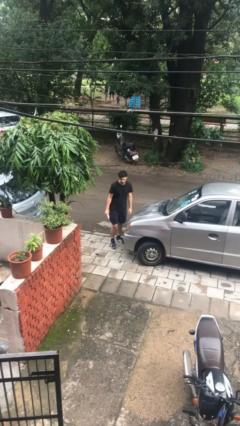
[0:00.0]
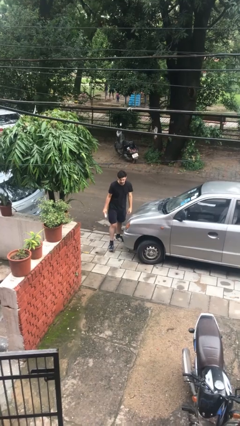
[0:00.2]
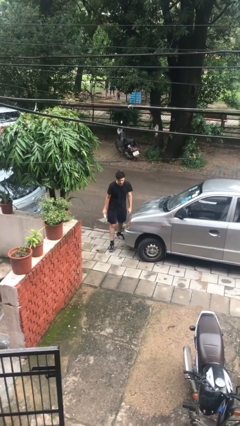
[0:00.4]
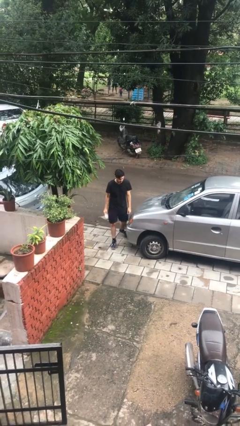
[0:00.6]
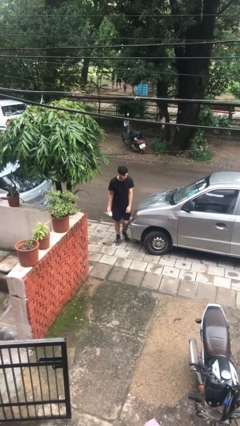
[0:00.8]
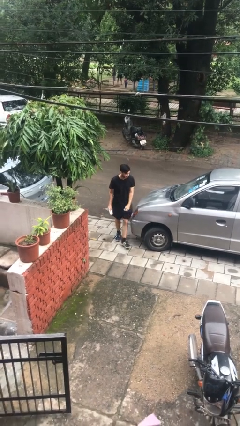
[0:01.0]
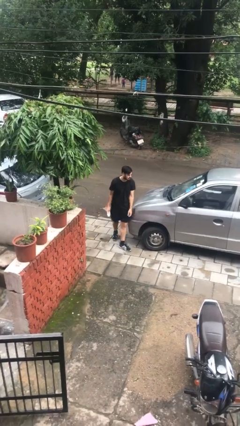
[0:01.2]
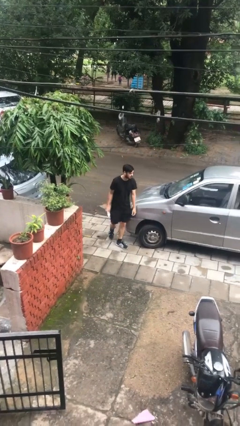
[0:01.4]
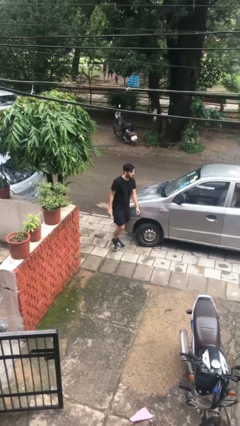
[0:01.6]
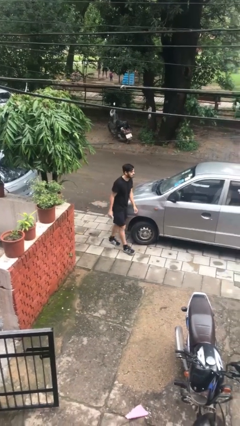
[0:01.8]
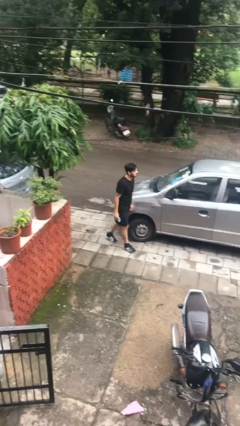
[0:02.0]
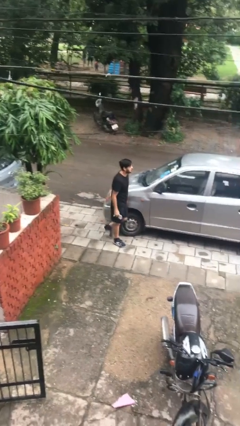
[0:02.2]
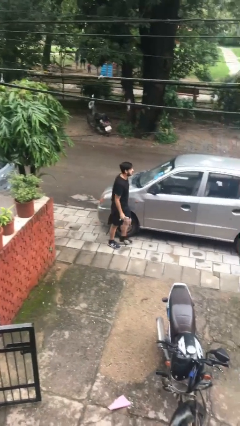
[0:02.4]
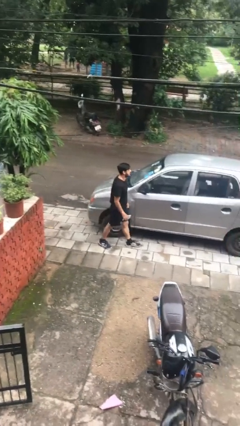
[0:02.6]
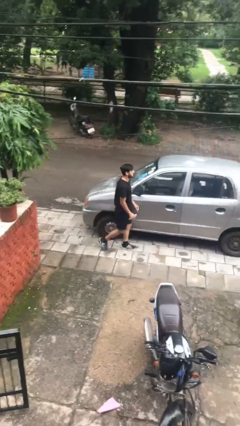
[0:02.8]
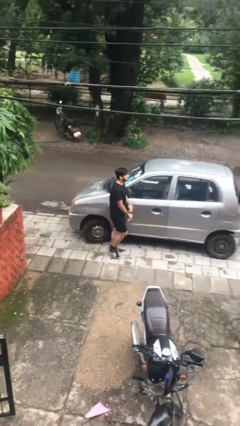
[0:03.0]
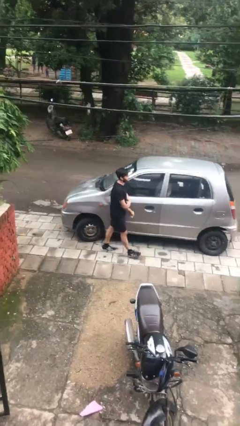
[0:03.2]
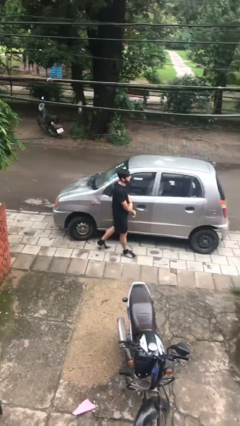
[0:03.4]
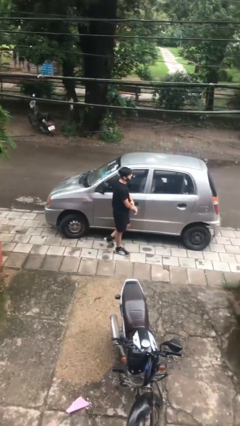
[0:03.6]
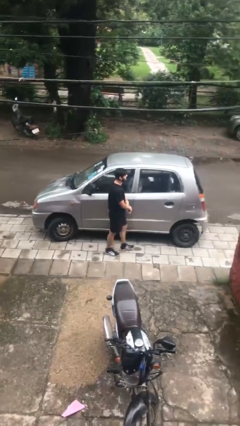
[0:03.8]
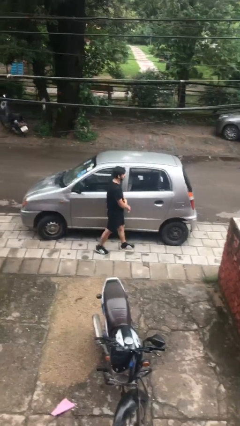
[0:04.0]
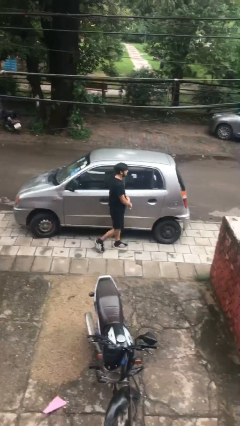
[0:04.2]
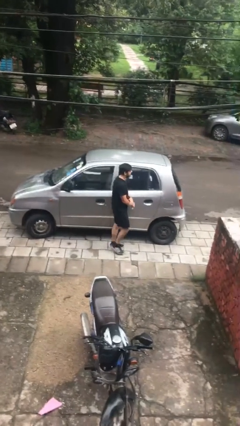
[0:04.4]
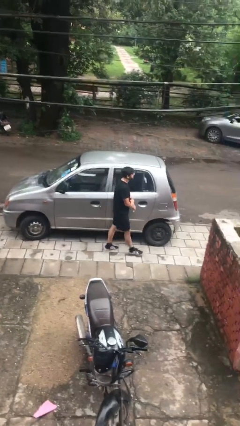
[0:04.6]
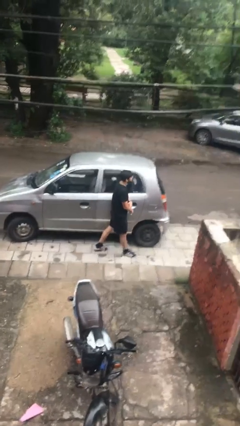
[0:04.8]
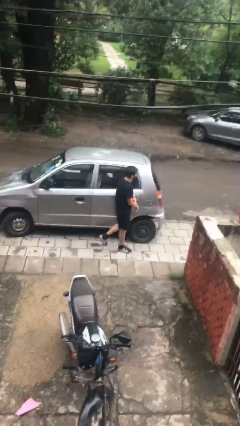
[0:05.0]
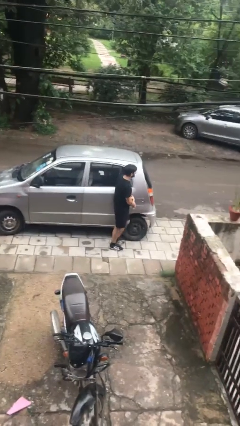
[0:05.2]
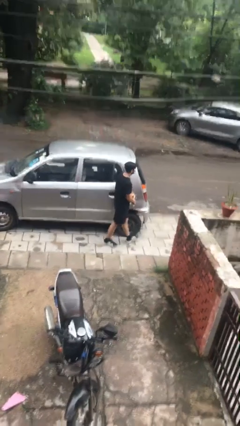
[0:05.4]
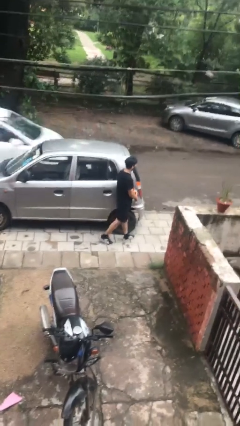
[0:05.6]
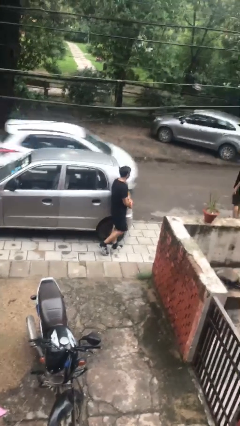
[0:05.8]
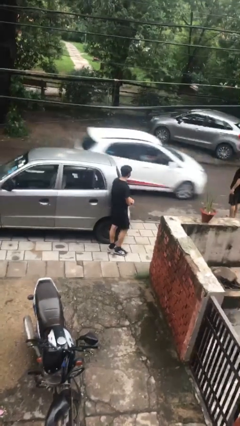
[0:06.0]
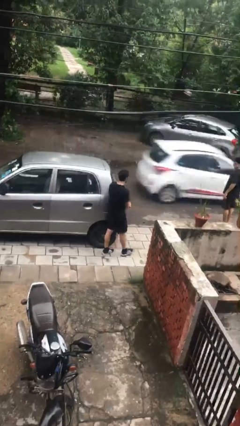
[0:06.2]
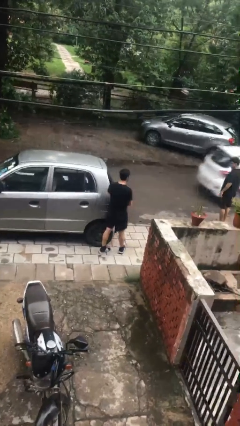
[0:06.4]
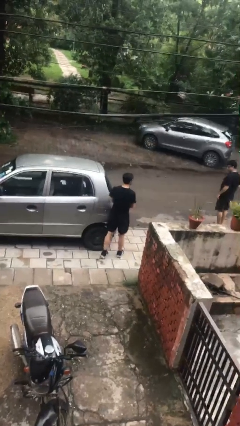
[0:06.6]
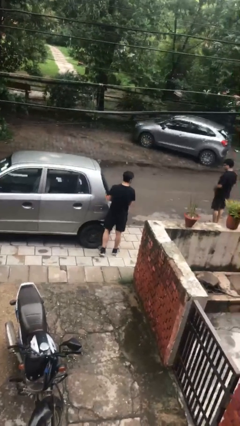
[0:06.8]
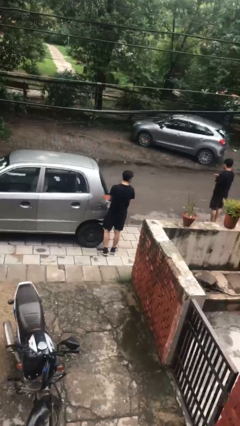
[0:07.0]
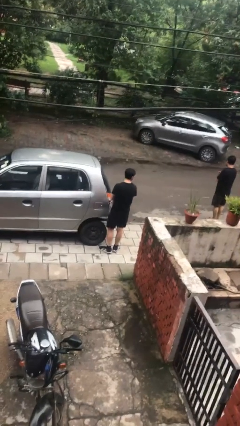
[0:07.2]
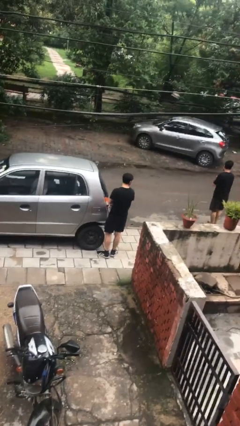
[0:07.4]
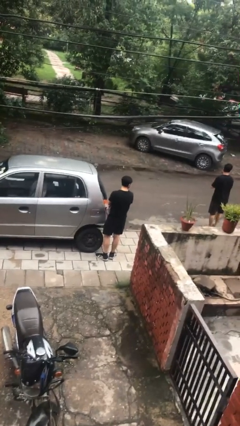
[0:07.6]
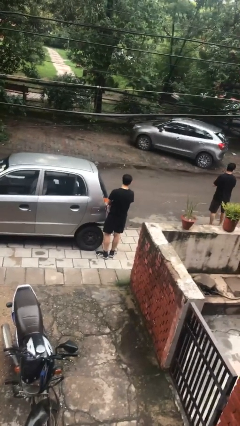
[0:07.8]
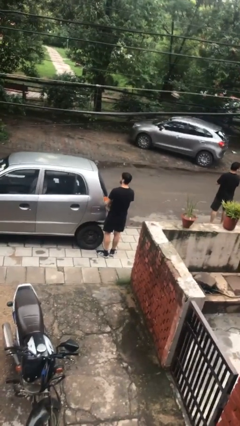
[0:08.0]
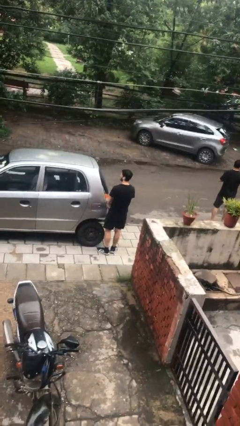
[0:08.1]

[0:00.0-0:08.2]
person walks around car

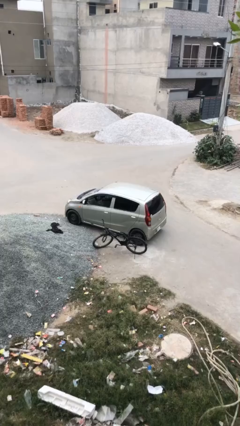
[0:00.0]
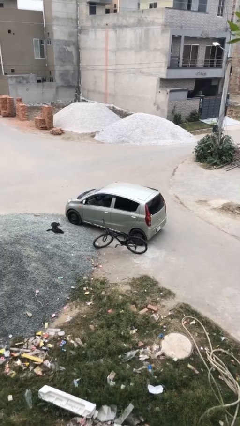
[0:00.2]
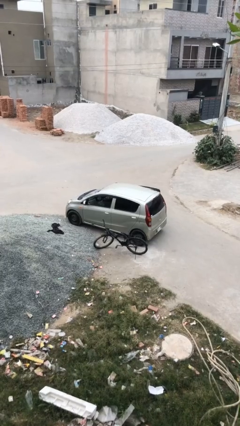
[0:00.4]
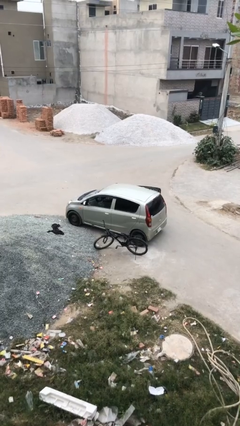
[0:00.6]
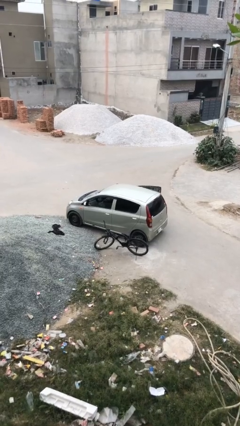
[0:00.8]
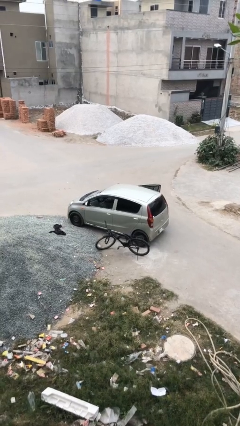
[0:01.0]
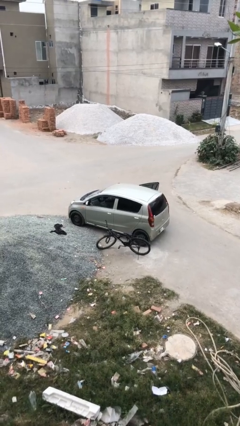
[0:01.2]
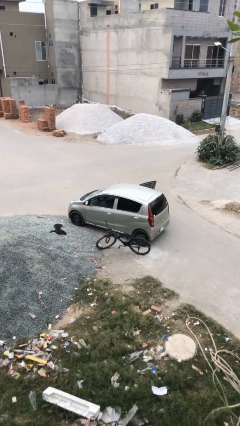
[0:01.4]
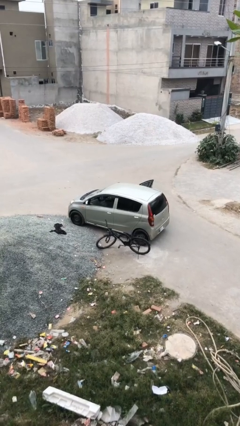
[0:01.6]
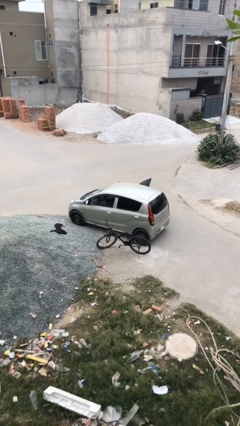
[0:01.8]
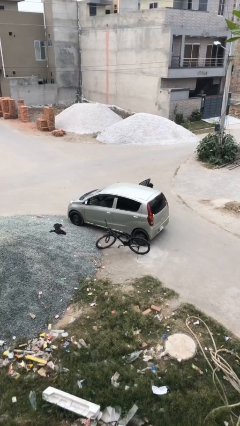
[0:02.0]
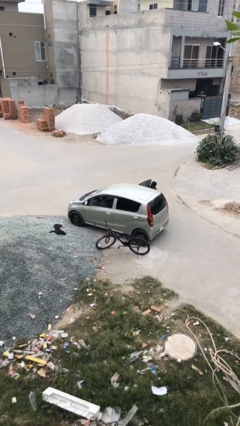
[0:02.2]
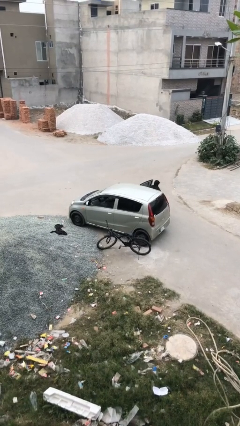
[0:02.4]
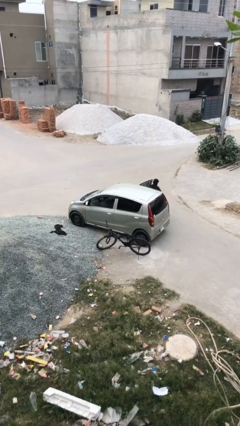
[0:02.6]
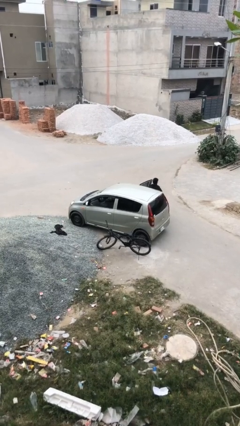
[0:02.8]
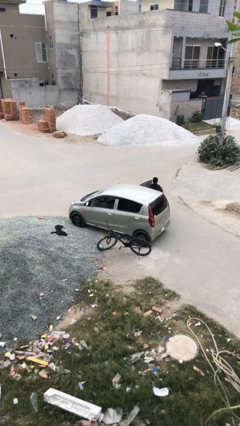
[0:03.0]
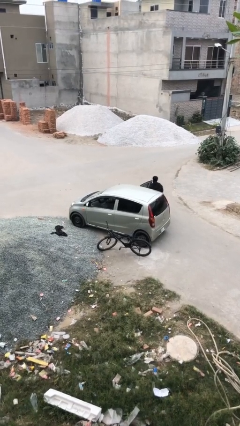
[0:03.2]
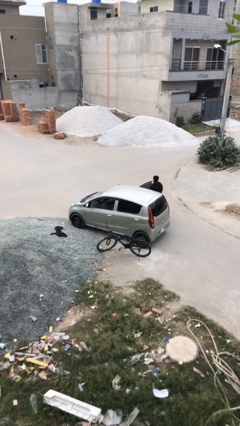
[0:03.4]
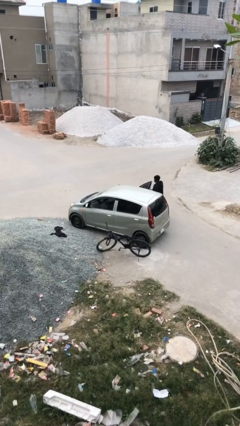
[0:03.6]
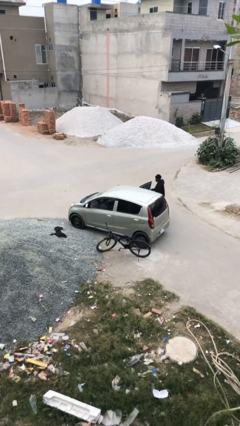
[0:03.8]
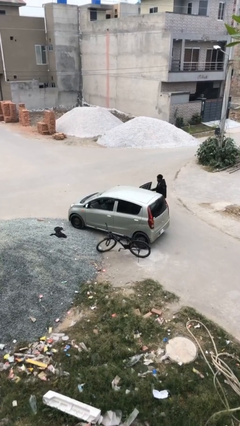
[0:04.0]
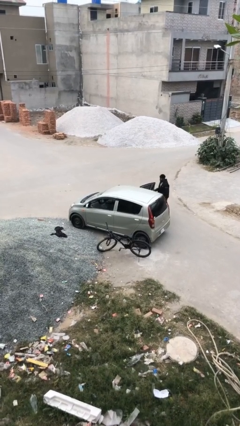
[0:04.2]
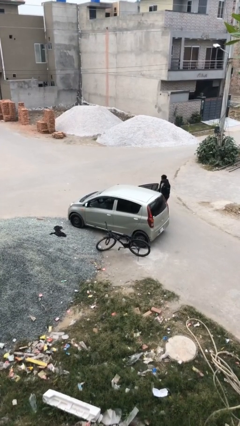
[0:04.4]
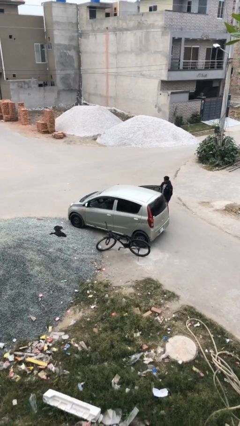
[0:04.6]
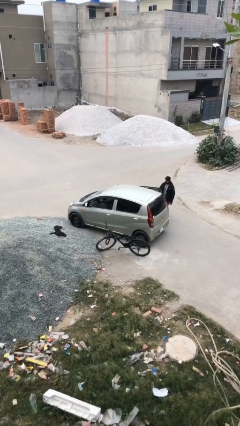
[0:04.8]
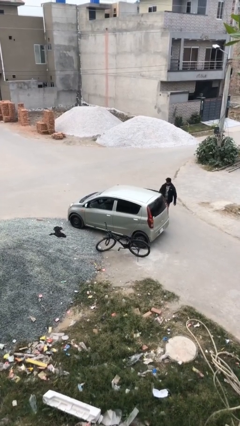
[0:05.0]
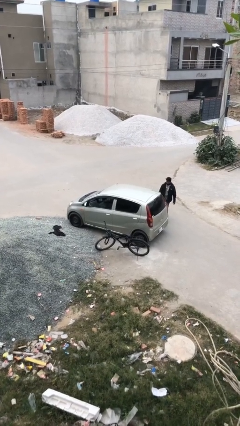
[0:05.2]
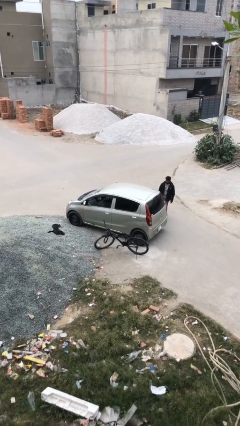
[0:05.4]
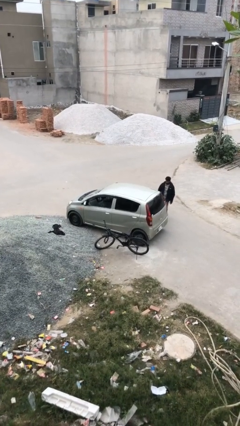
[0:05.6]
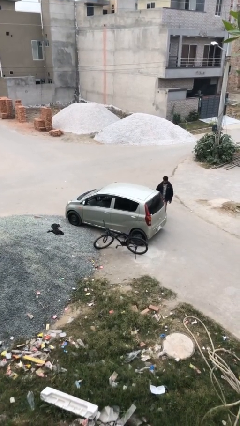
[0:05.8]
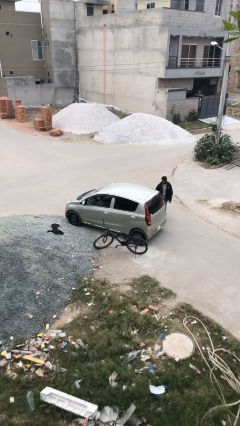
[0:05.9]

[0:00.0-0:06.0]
car drops off person

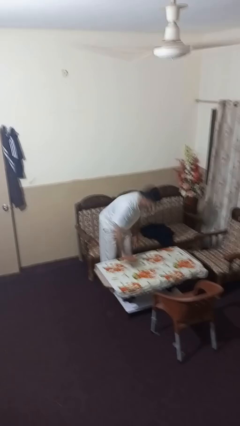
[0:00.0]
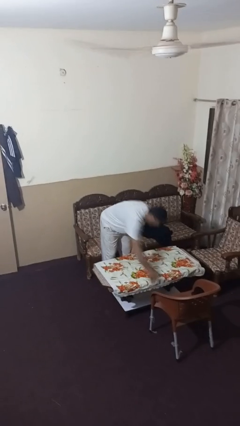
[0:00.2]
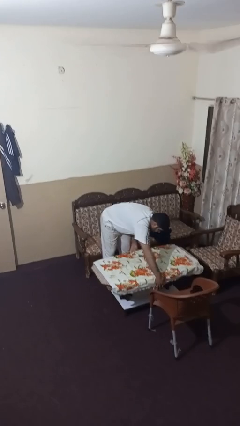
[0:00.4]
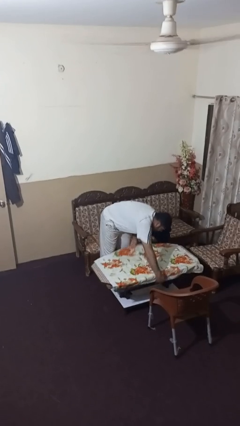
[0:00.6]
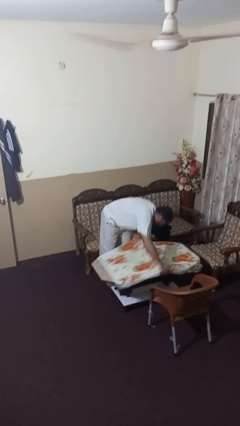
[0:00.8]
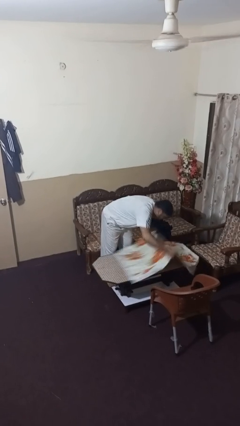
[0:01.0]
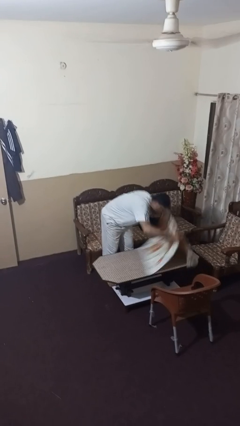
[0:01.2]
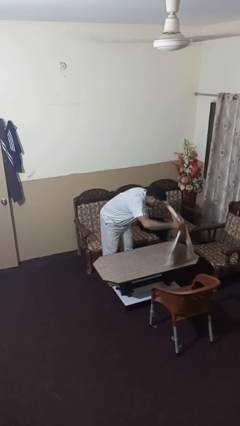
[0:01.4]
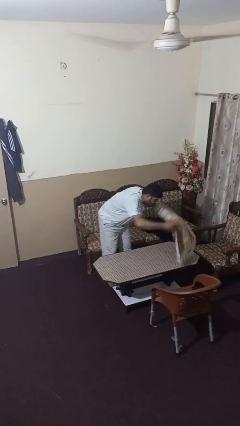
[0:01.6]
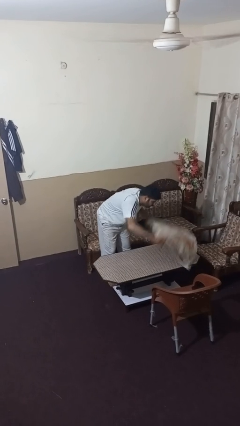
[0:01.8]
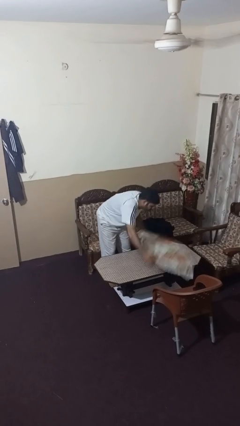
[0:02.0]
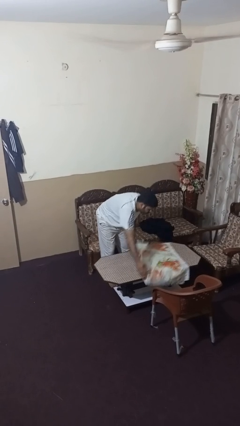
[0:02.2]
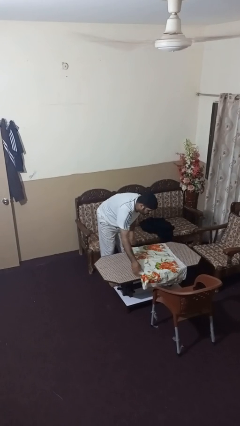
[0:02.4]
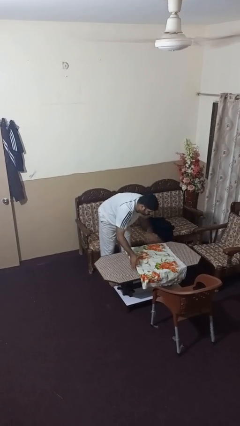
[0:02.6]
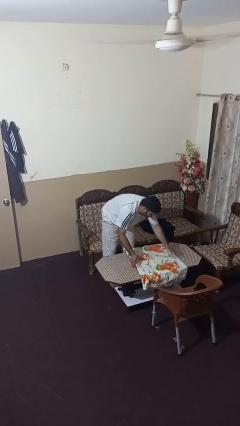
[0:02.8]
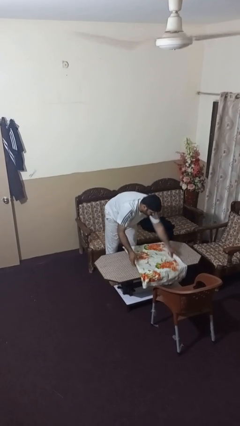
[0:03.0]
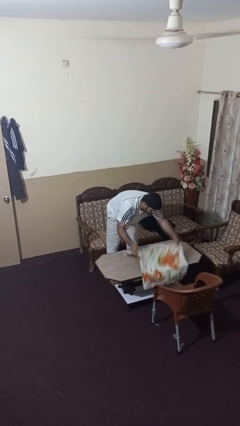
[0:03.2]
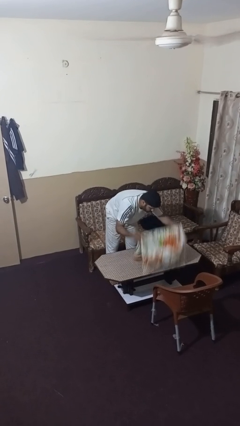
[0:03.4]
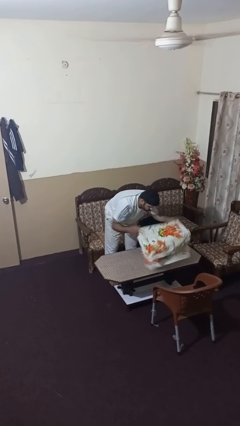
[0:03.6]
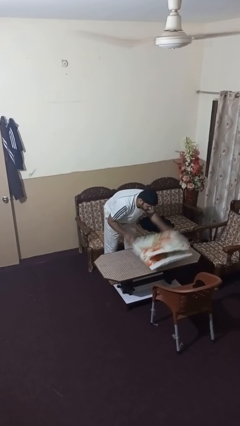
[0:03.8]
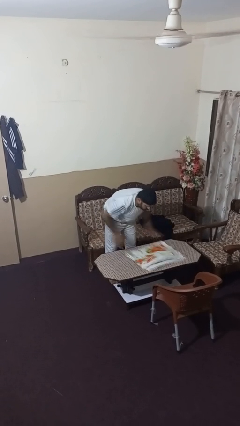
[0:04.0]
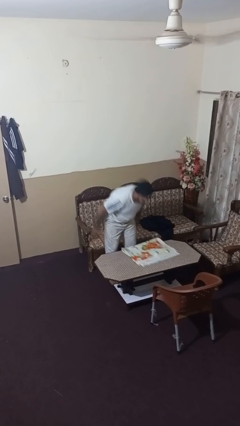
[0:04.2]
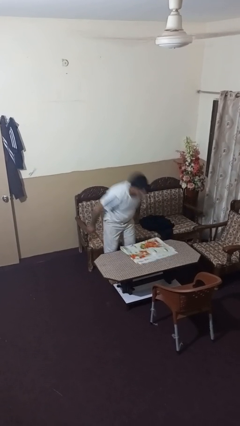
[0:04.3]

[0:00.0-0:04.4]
person folds tablecloth
